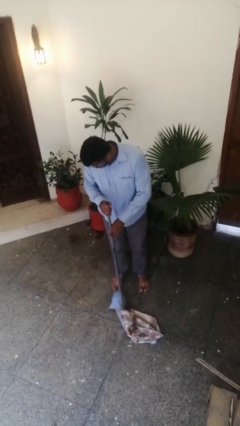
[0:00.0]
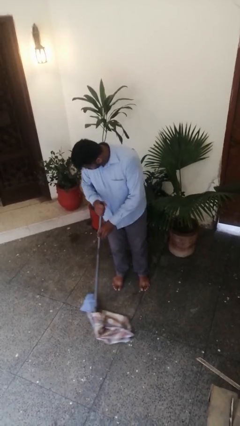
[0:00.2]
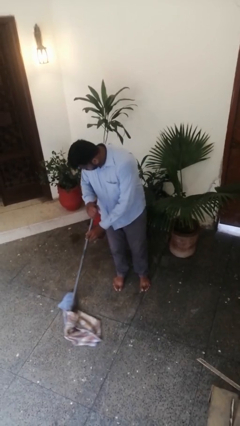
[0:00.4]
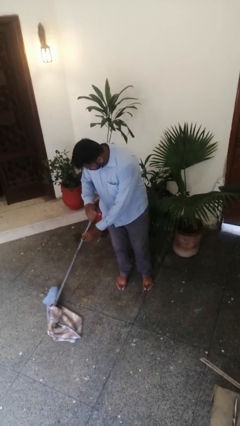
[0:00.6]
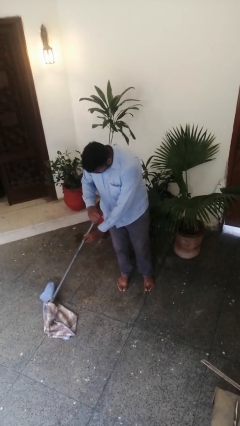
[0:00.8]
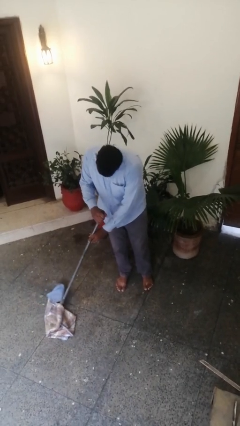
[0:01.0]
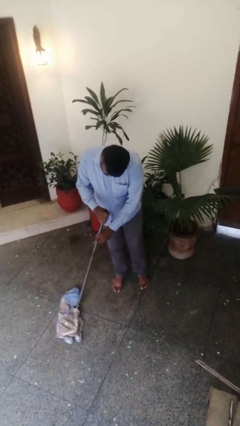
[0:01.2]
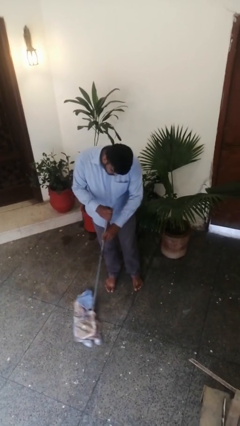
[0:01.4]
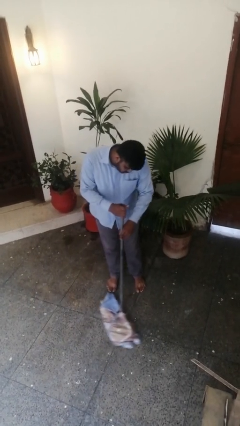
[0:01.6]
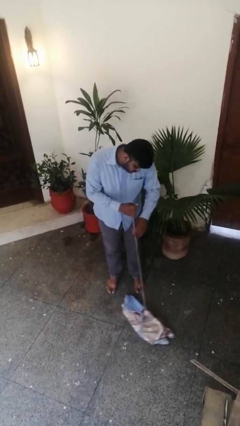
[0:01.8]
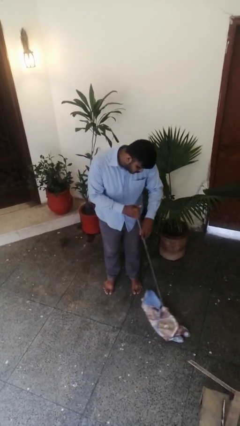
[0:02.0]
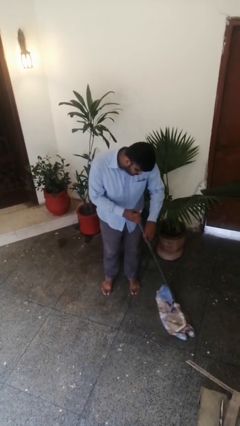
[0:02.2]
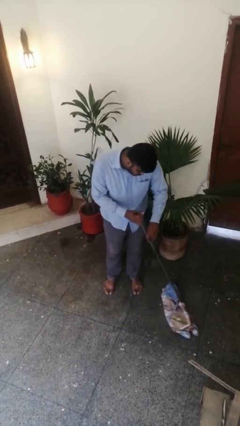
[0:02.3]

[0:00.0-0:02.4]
person sweeps floor

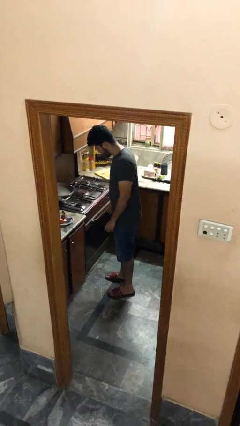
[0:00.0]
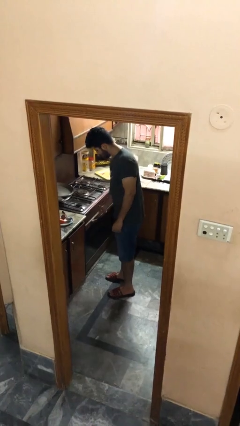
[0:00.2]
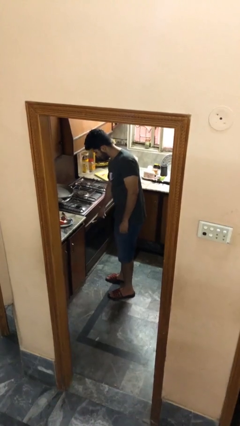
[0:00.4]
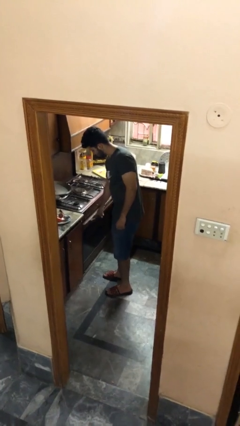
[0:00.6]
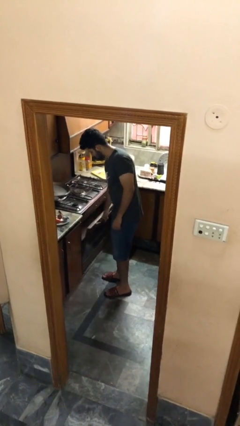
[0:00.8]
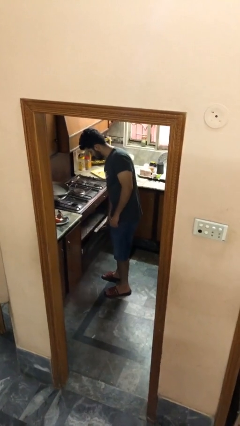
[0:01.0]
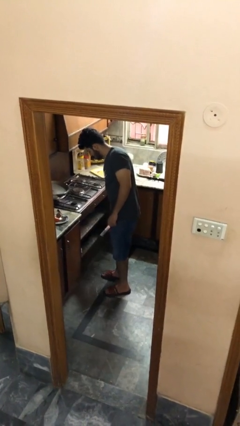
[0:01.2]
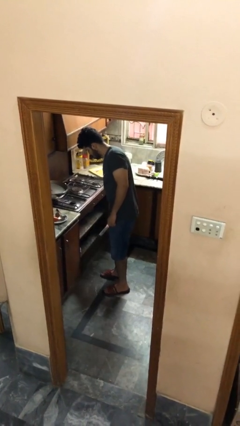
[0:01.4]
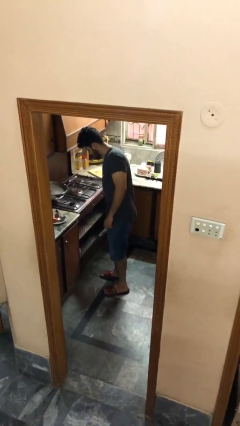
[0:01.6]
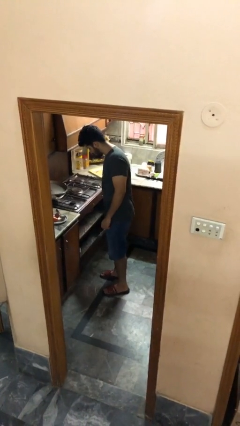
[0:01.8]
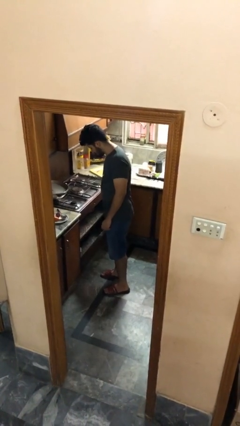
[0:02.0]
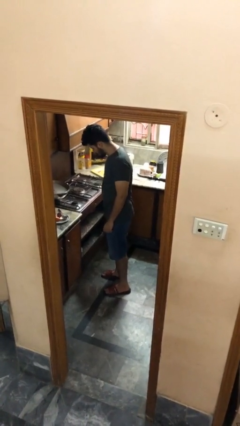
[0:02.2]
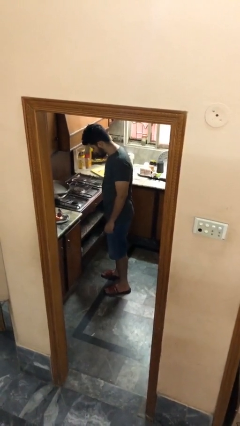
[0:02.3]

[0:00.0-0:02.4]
person opens oven door

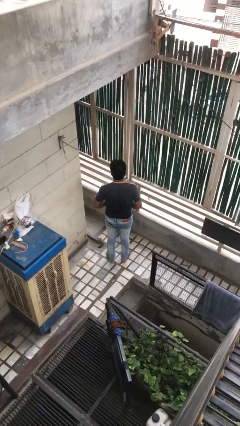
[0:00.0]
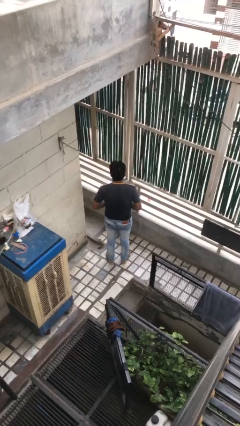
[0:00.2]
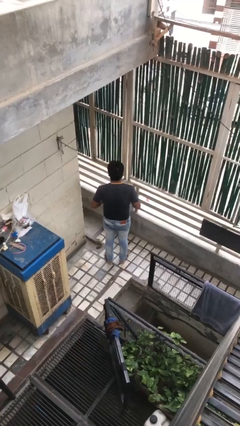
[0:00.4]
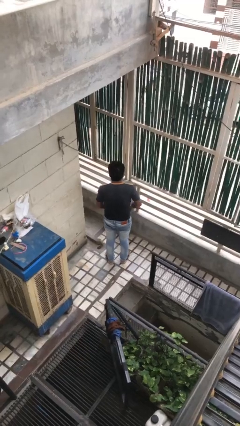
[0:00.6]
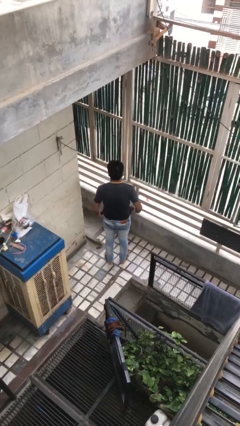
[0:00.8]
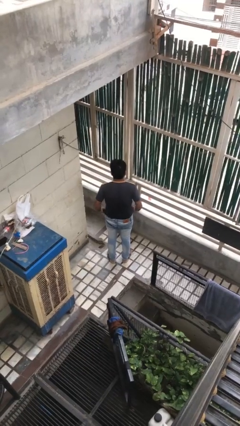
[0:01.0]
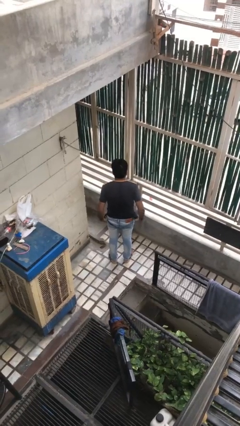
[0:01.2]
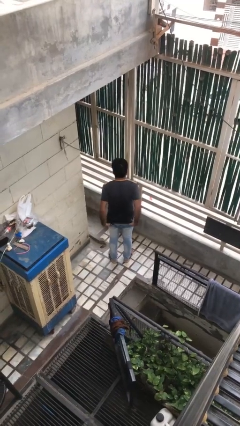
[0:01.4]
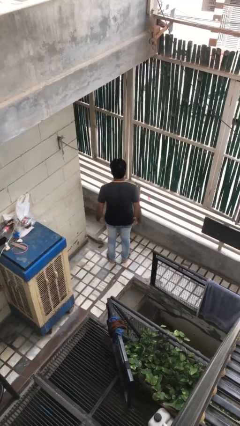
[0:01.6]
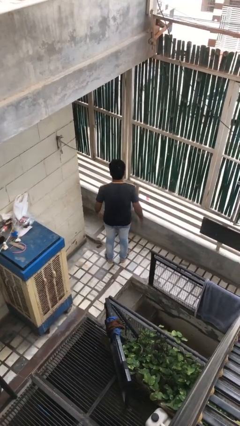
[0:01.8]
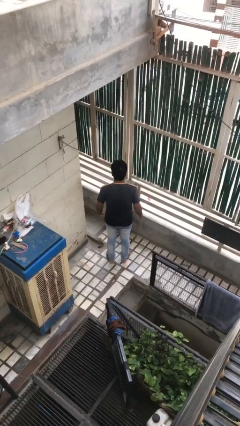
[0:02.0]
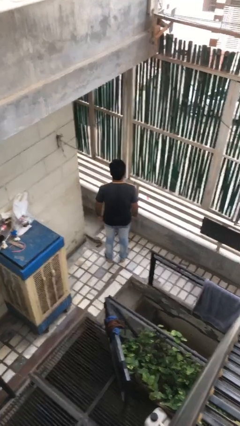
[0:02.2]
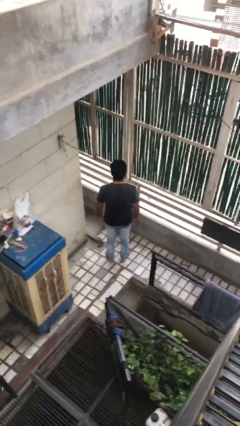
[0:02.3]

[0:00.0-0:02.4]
person untucks shirt

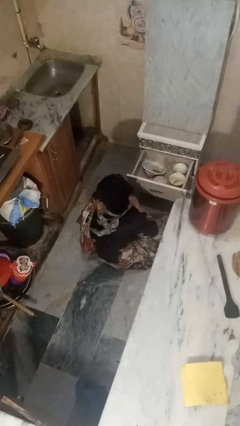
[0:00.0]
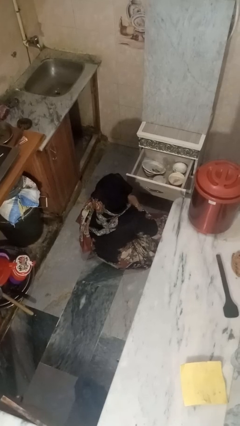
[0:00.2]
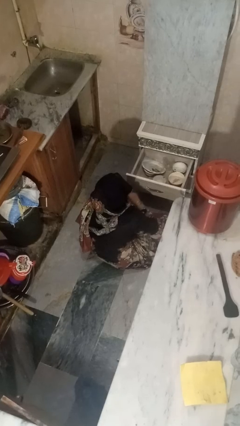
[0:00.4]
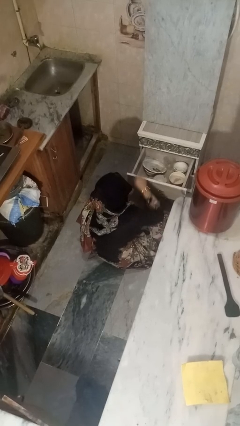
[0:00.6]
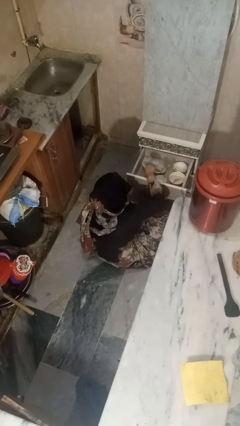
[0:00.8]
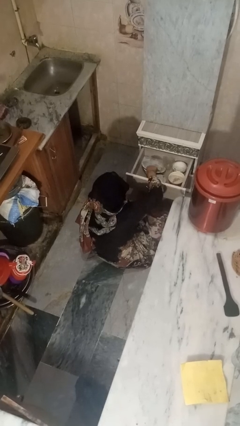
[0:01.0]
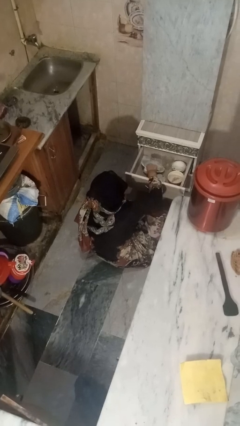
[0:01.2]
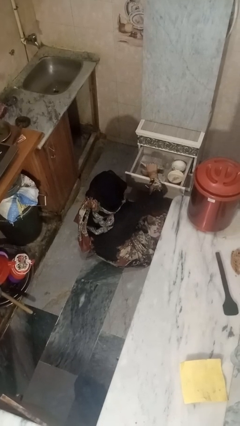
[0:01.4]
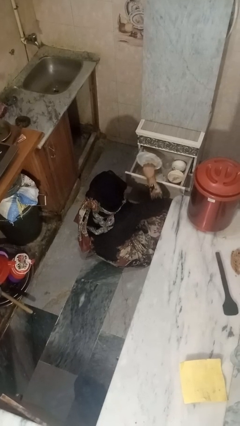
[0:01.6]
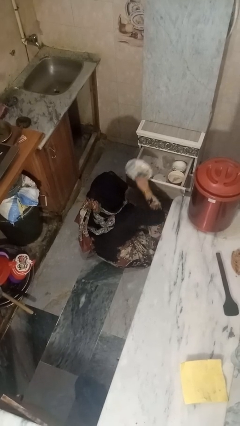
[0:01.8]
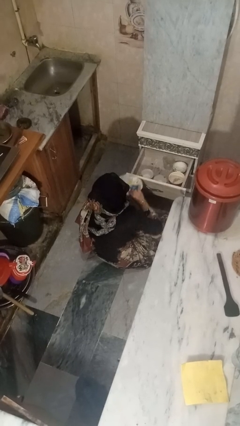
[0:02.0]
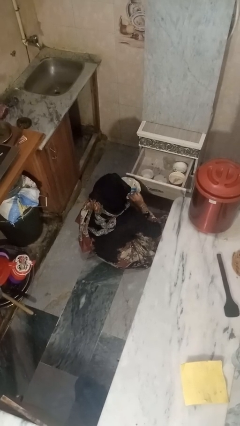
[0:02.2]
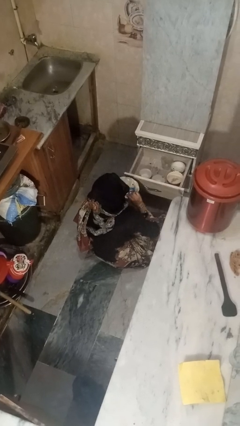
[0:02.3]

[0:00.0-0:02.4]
person takes object from kitchen drawer

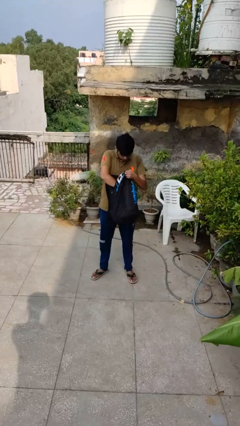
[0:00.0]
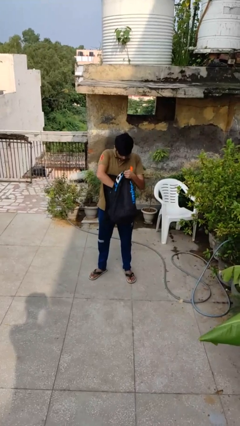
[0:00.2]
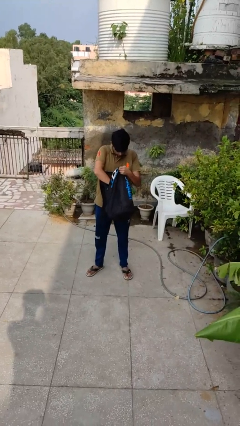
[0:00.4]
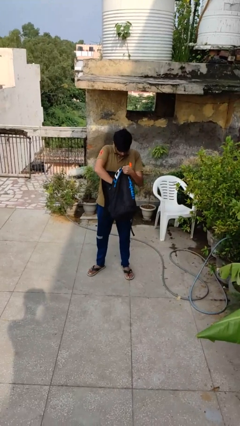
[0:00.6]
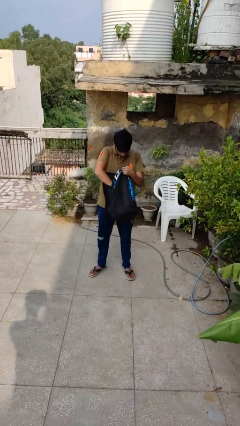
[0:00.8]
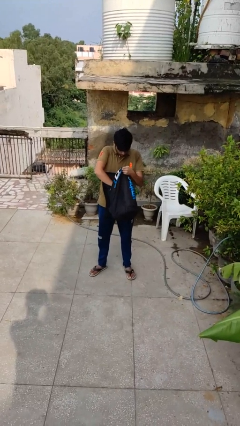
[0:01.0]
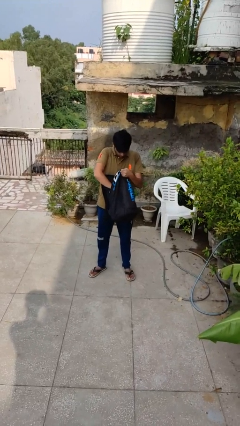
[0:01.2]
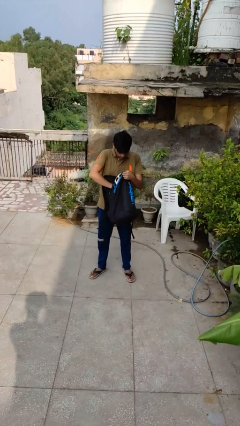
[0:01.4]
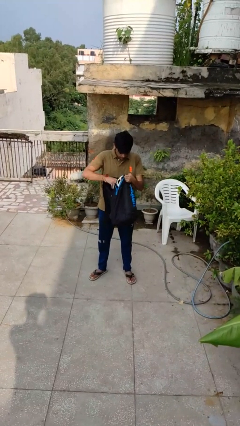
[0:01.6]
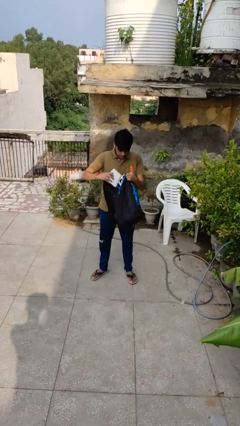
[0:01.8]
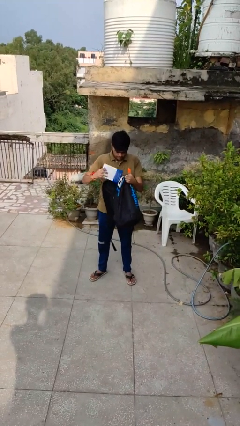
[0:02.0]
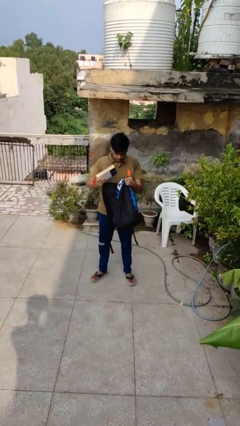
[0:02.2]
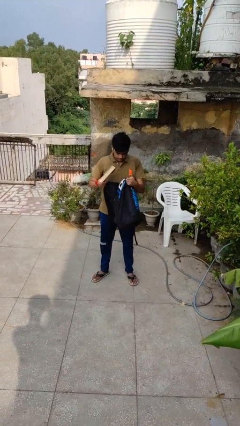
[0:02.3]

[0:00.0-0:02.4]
person searches in backpack

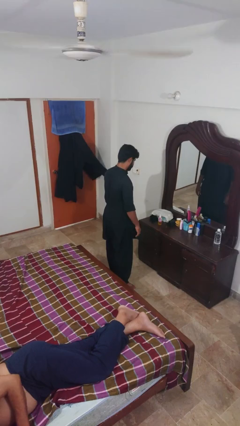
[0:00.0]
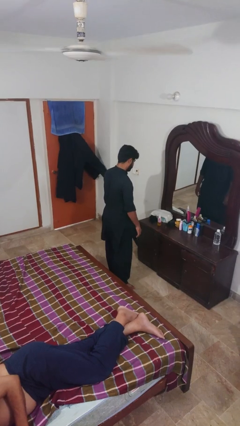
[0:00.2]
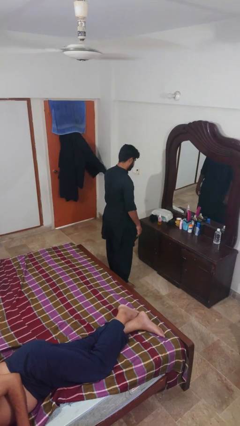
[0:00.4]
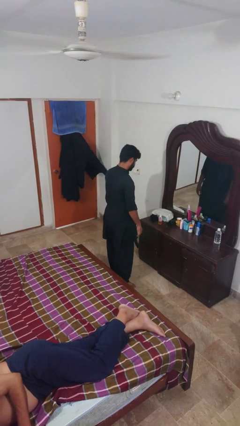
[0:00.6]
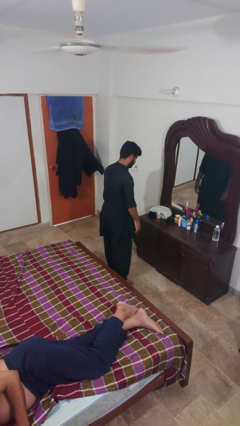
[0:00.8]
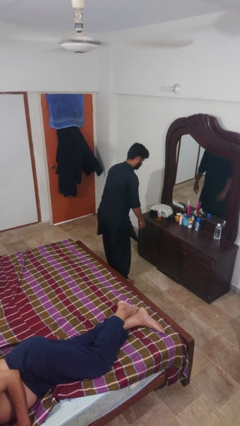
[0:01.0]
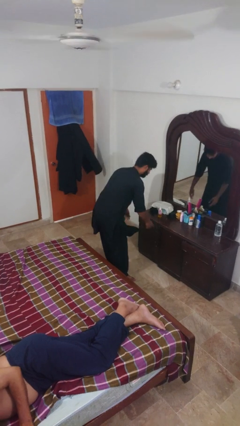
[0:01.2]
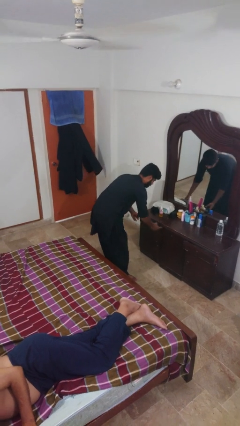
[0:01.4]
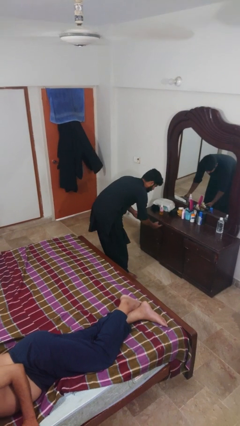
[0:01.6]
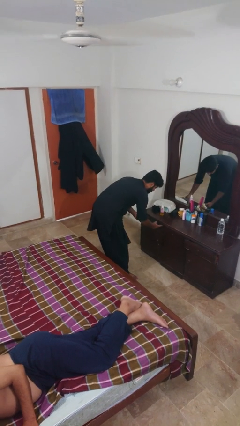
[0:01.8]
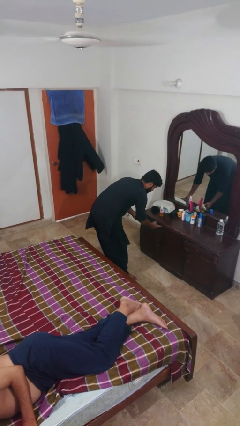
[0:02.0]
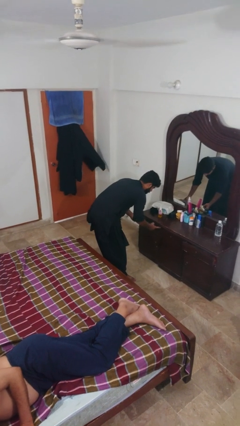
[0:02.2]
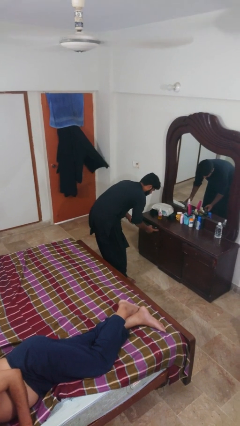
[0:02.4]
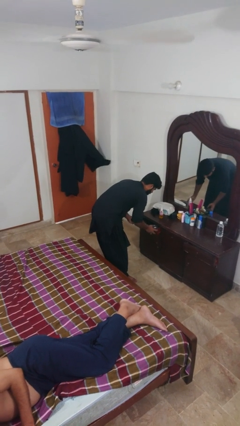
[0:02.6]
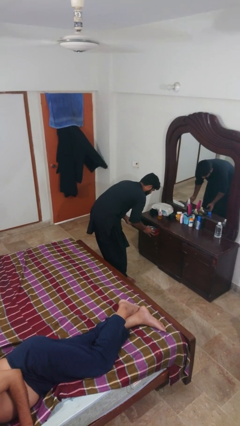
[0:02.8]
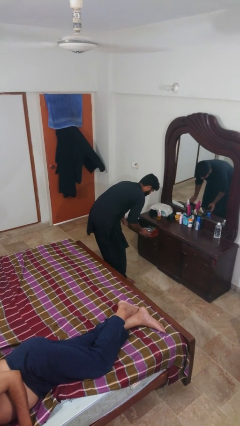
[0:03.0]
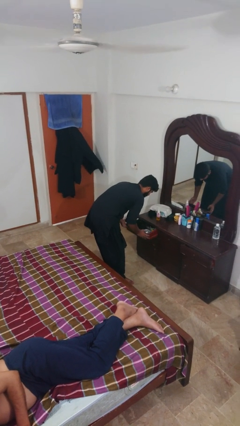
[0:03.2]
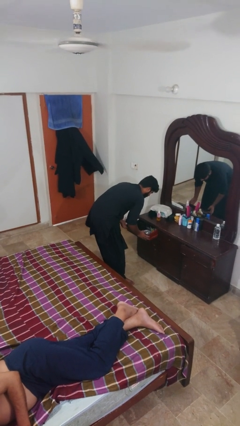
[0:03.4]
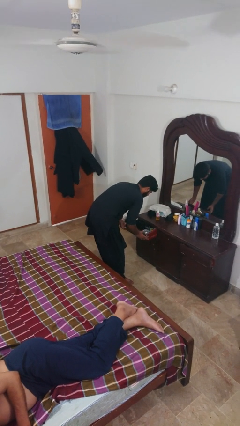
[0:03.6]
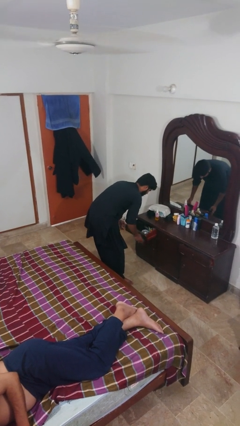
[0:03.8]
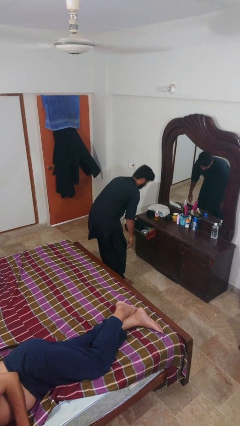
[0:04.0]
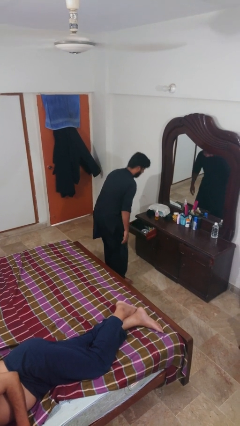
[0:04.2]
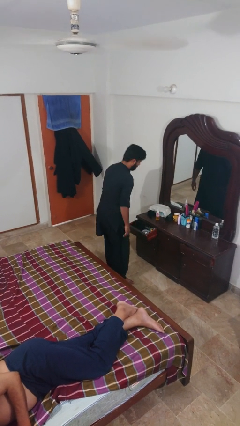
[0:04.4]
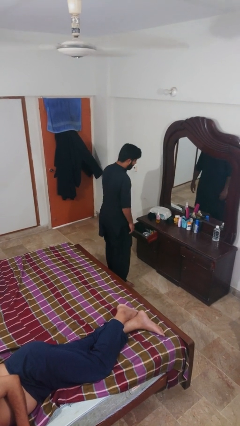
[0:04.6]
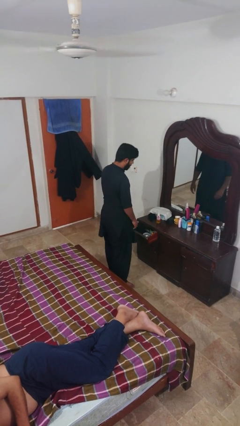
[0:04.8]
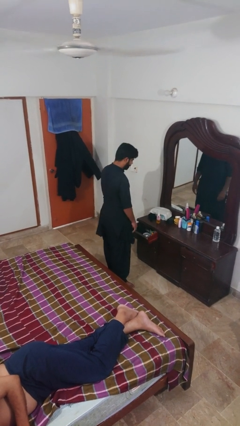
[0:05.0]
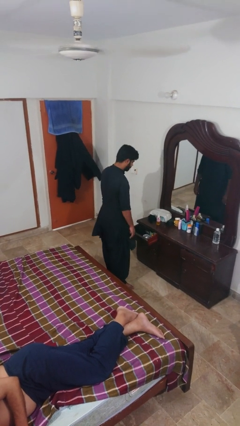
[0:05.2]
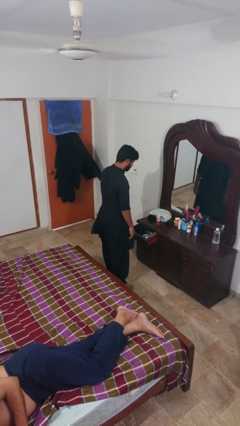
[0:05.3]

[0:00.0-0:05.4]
person opens dresser drawer
